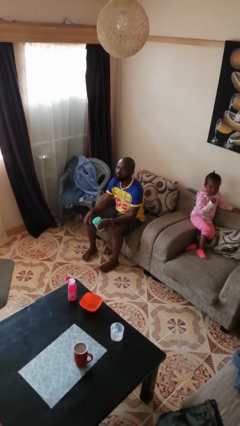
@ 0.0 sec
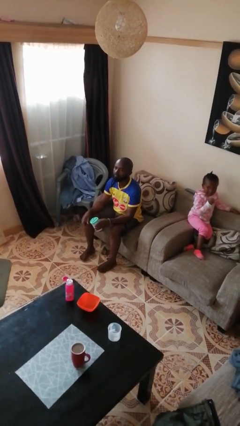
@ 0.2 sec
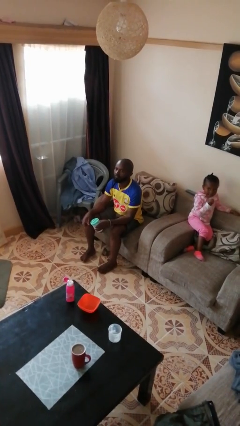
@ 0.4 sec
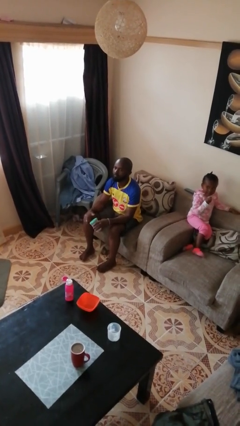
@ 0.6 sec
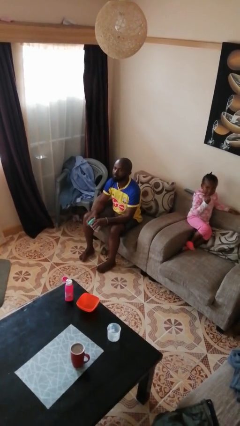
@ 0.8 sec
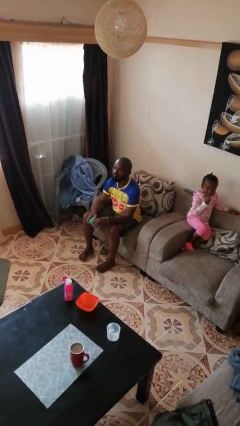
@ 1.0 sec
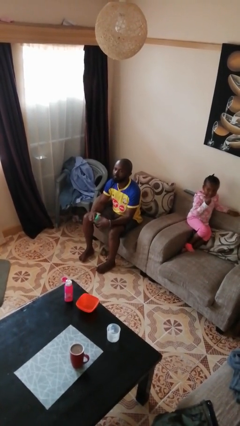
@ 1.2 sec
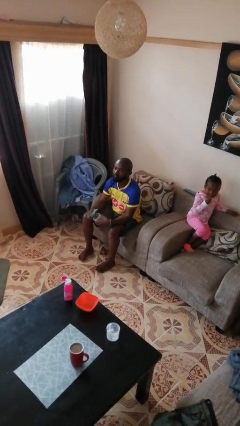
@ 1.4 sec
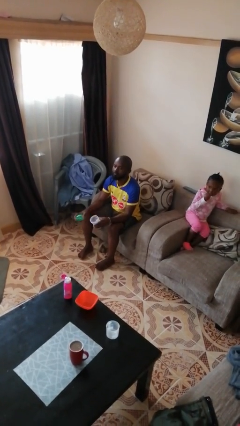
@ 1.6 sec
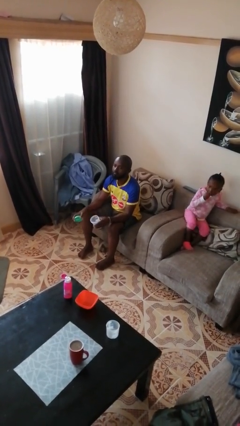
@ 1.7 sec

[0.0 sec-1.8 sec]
person opens jar

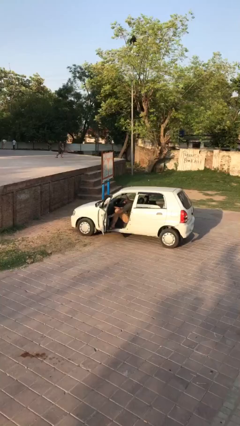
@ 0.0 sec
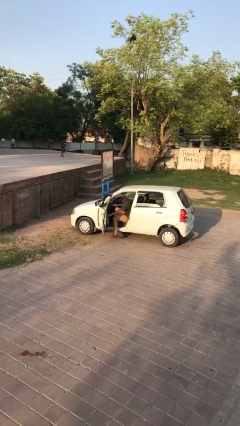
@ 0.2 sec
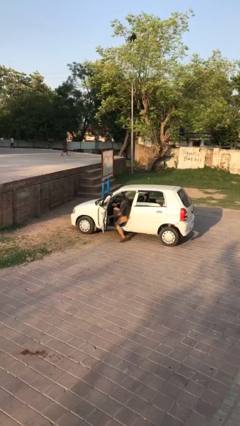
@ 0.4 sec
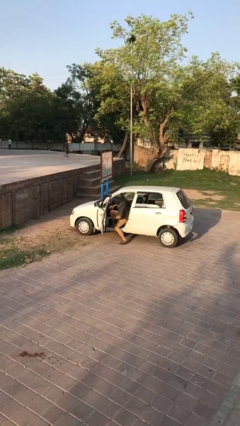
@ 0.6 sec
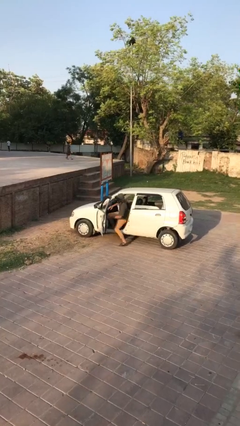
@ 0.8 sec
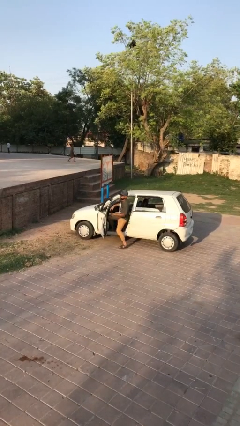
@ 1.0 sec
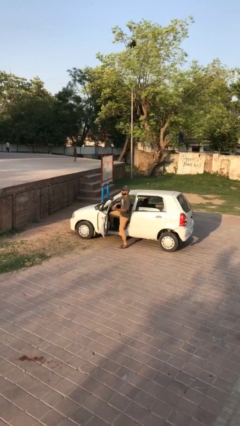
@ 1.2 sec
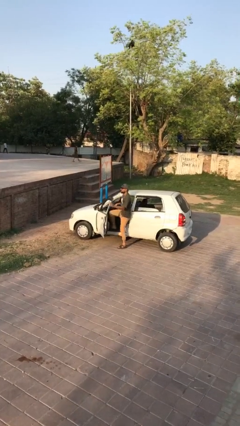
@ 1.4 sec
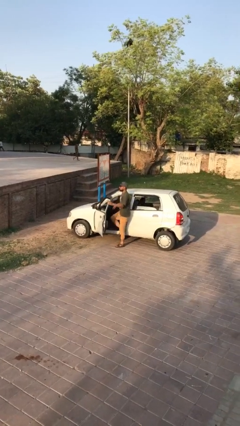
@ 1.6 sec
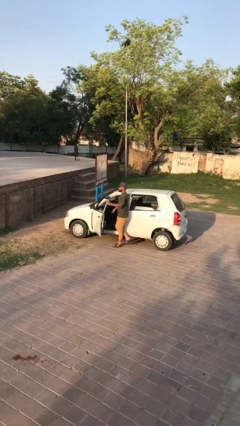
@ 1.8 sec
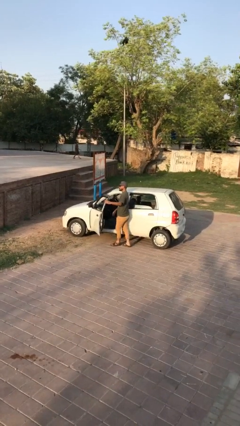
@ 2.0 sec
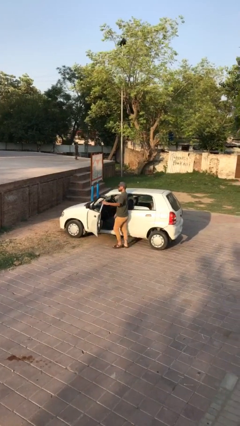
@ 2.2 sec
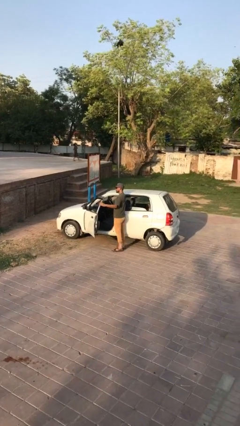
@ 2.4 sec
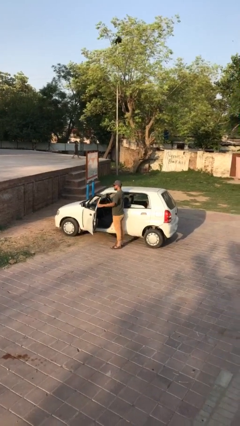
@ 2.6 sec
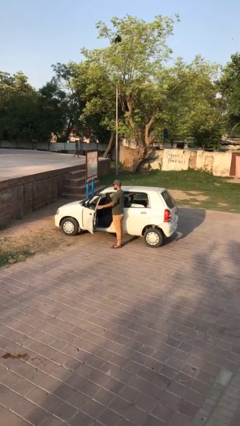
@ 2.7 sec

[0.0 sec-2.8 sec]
person exits car

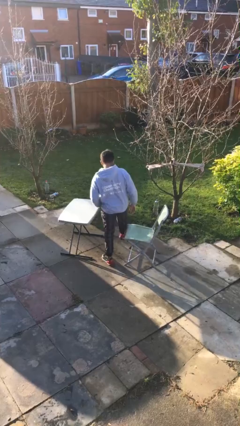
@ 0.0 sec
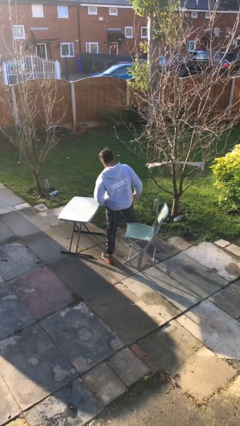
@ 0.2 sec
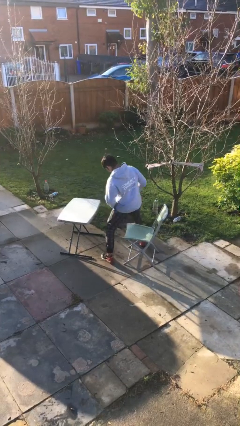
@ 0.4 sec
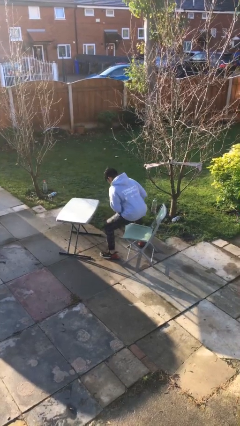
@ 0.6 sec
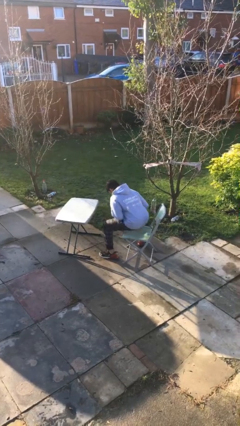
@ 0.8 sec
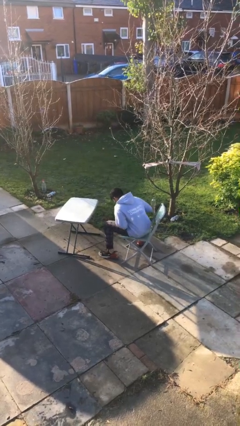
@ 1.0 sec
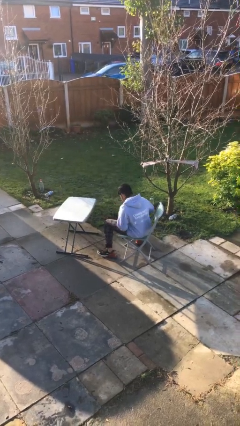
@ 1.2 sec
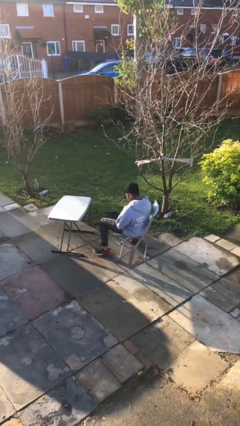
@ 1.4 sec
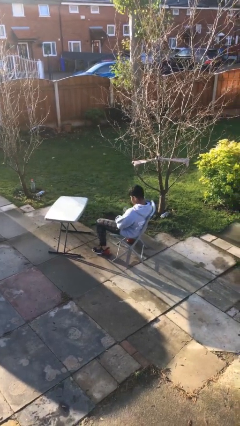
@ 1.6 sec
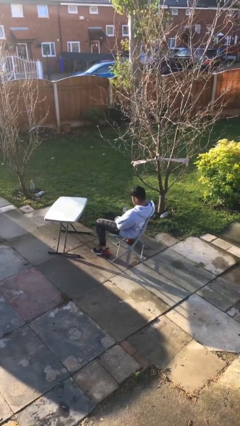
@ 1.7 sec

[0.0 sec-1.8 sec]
person sits down

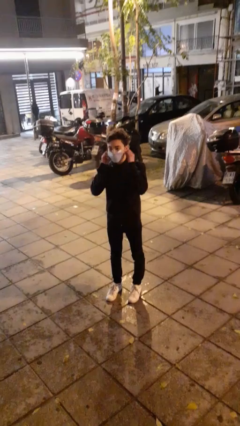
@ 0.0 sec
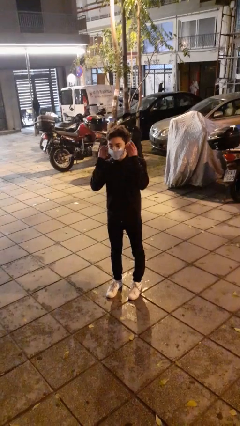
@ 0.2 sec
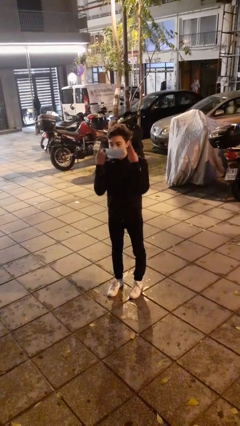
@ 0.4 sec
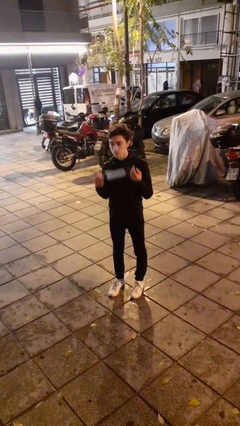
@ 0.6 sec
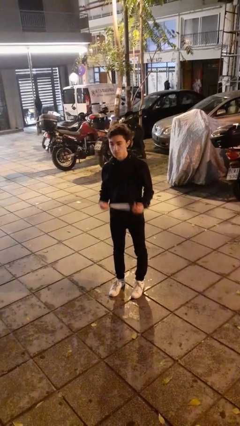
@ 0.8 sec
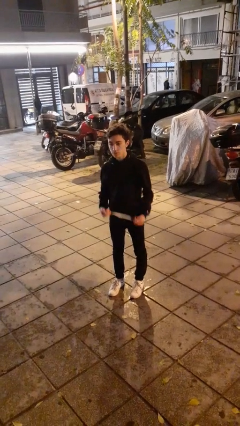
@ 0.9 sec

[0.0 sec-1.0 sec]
person takes off facemask

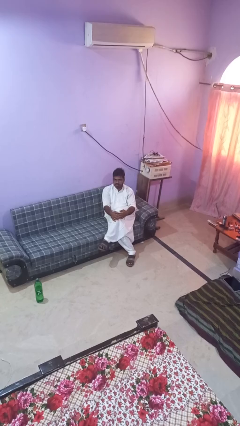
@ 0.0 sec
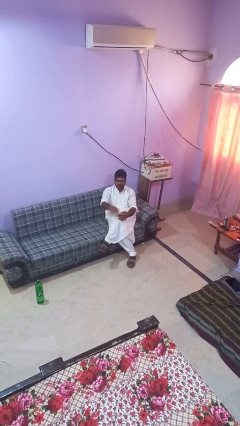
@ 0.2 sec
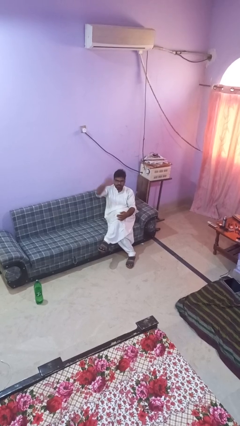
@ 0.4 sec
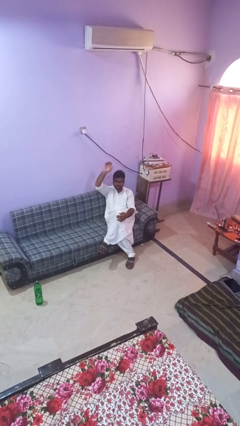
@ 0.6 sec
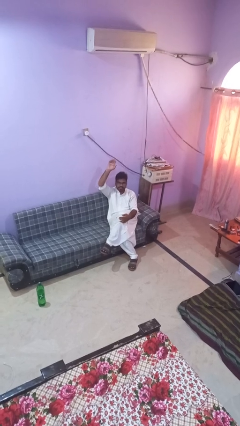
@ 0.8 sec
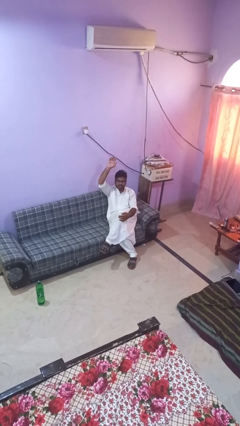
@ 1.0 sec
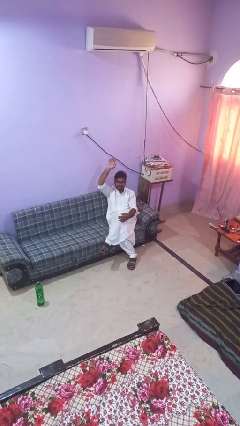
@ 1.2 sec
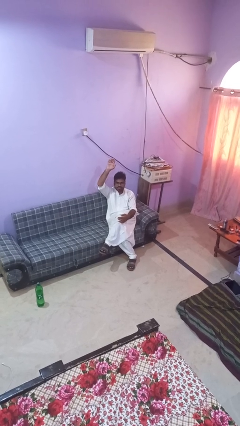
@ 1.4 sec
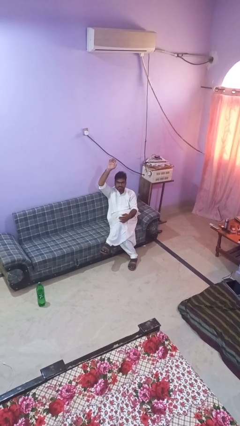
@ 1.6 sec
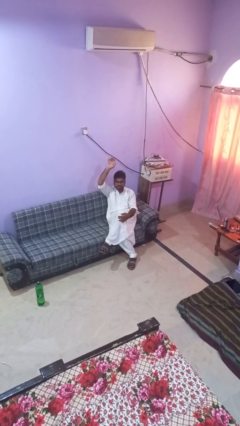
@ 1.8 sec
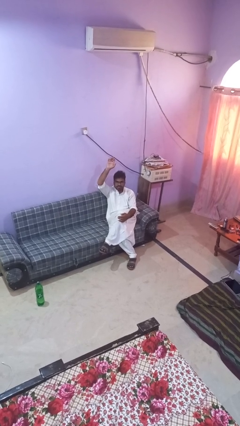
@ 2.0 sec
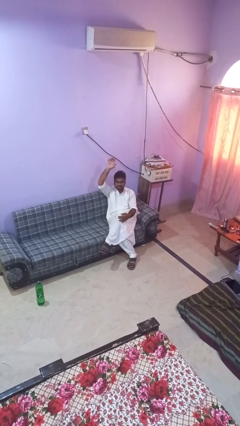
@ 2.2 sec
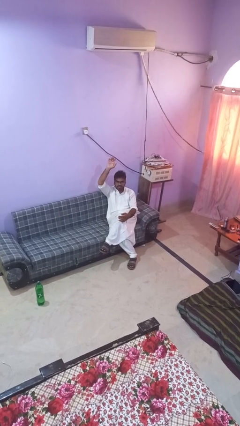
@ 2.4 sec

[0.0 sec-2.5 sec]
person gestures raise hand

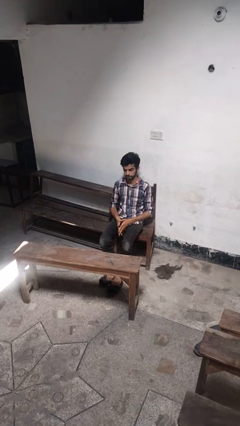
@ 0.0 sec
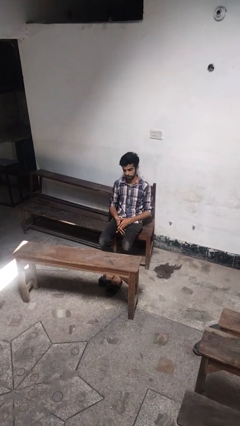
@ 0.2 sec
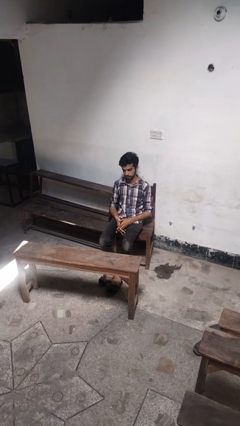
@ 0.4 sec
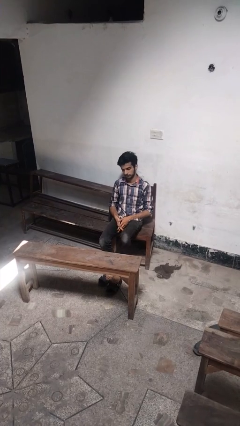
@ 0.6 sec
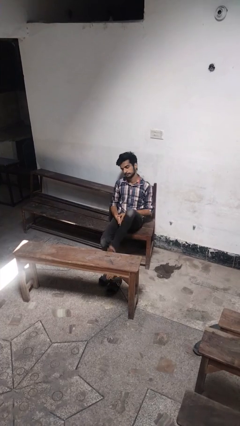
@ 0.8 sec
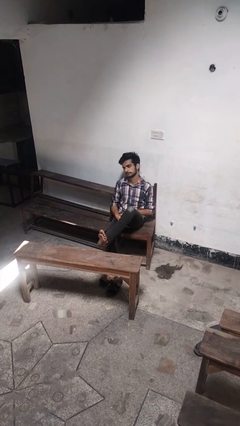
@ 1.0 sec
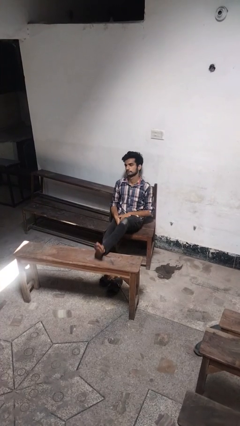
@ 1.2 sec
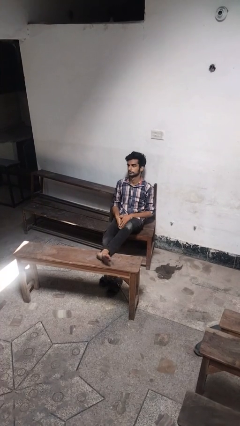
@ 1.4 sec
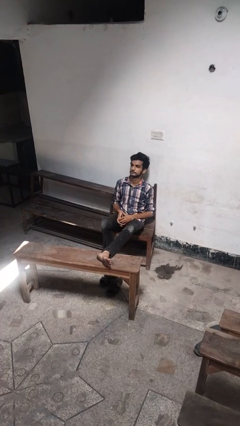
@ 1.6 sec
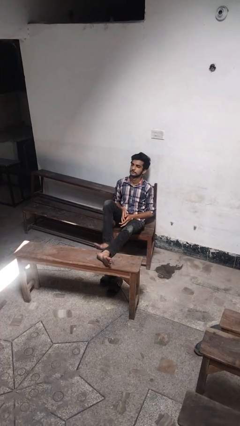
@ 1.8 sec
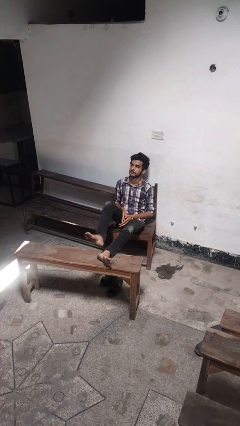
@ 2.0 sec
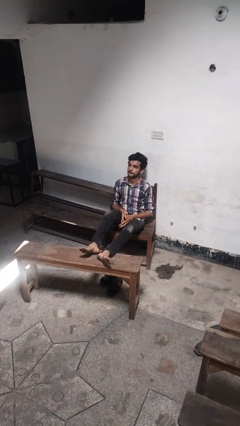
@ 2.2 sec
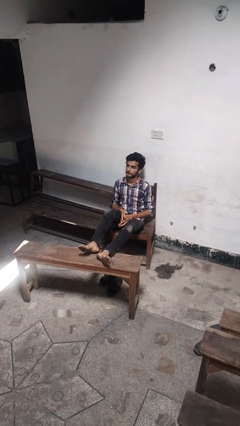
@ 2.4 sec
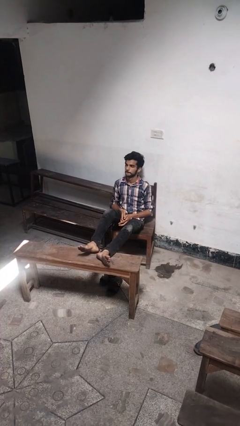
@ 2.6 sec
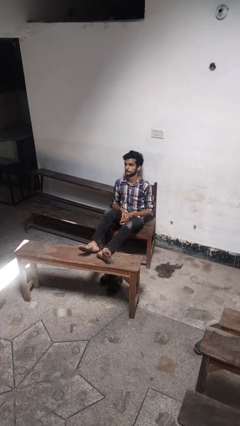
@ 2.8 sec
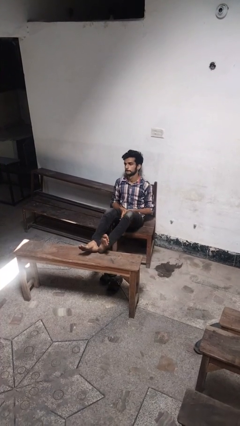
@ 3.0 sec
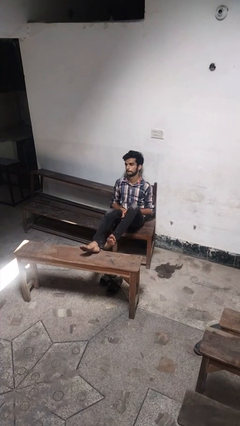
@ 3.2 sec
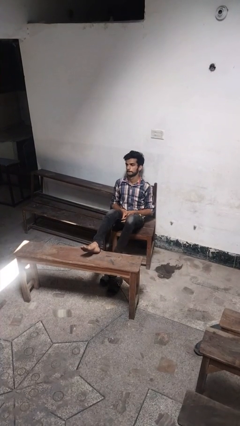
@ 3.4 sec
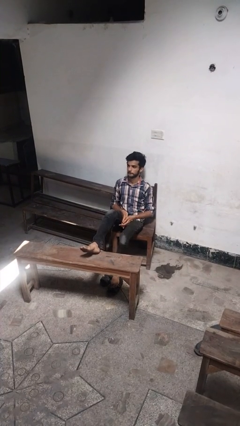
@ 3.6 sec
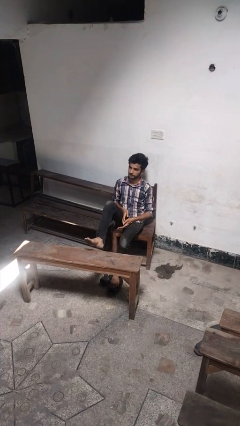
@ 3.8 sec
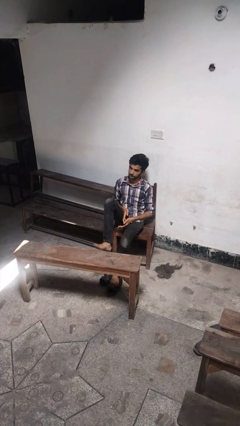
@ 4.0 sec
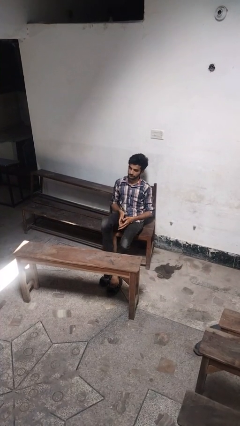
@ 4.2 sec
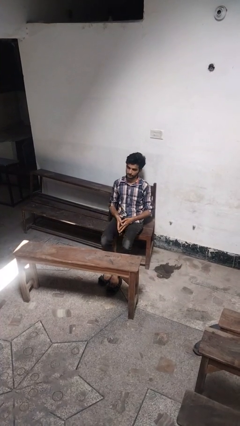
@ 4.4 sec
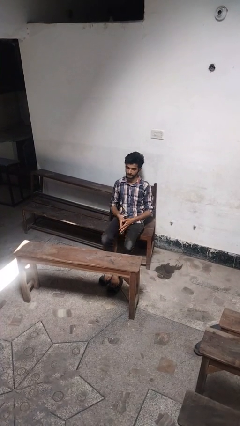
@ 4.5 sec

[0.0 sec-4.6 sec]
person puts feet up

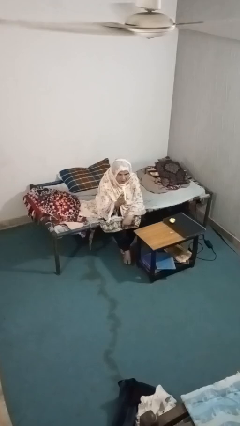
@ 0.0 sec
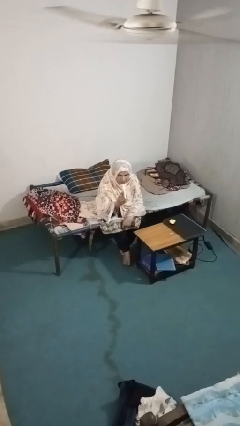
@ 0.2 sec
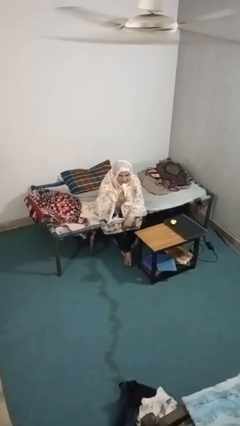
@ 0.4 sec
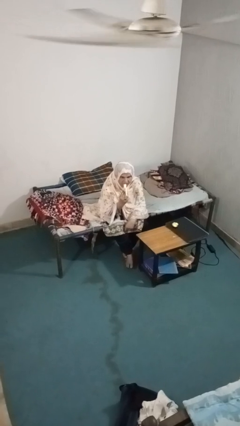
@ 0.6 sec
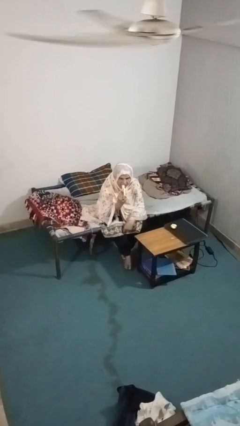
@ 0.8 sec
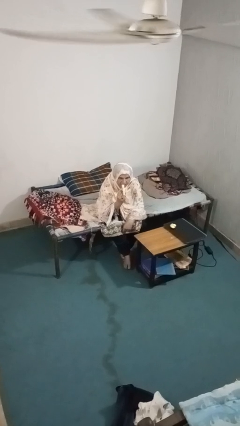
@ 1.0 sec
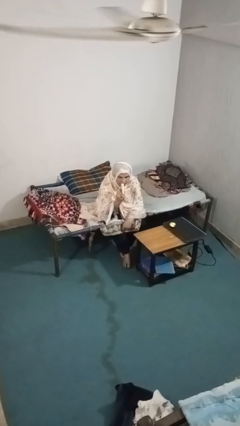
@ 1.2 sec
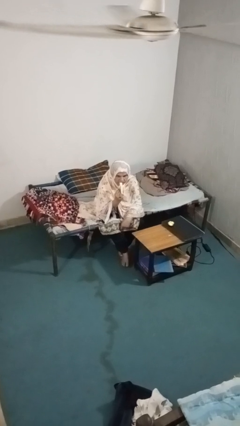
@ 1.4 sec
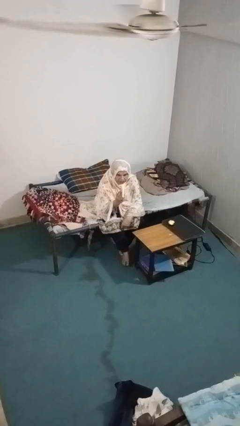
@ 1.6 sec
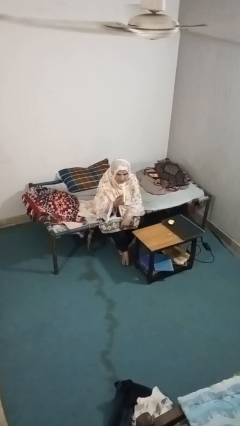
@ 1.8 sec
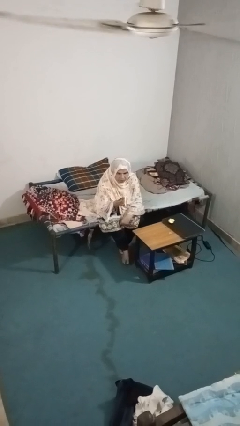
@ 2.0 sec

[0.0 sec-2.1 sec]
person eats banana

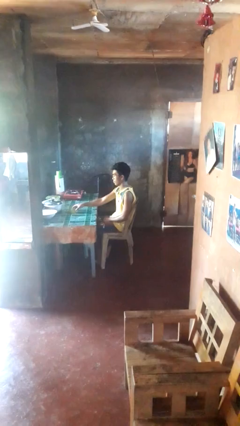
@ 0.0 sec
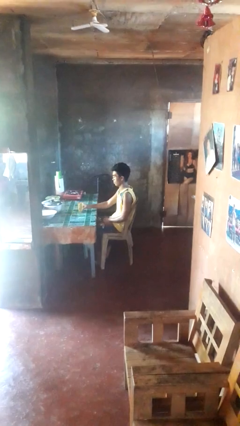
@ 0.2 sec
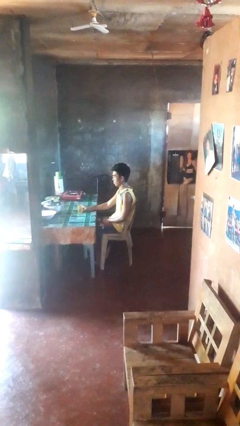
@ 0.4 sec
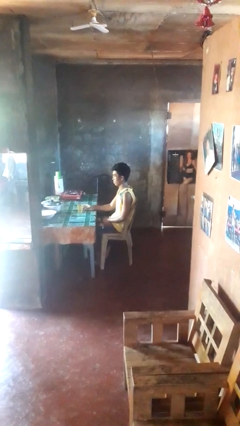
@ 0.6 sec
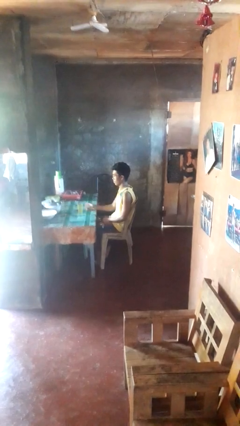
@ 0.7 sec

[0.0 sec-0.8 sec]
person sets upright glass
